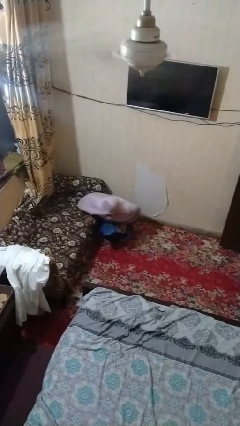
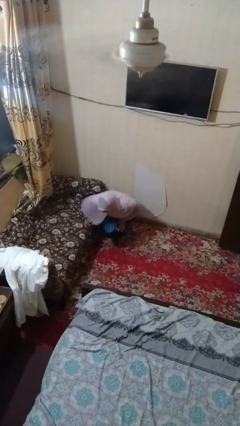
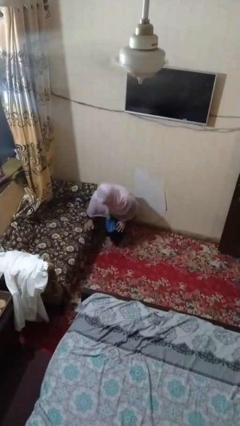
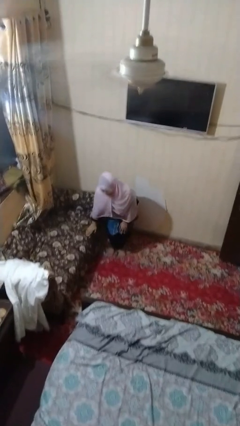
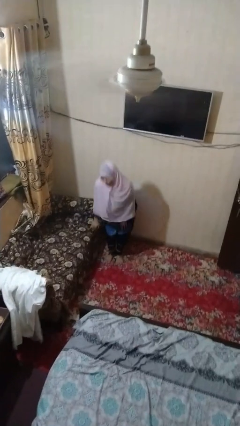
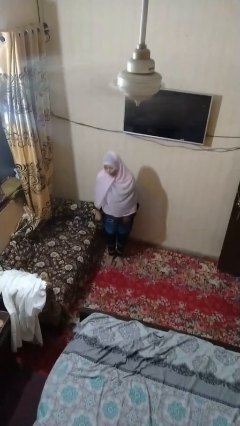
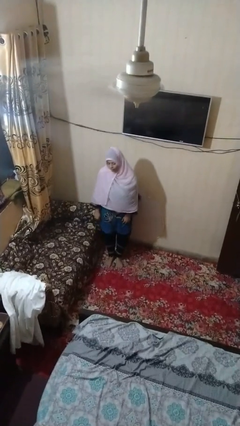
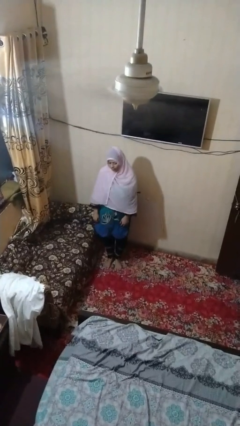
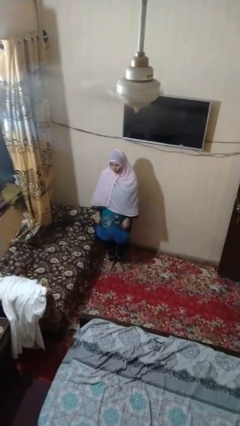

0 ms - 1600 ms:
person stands up

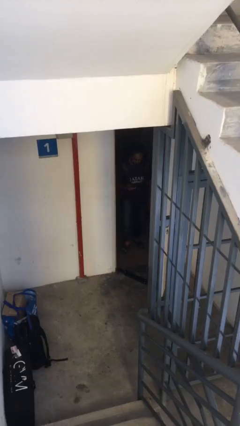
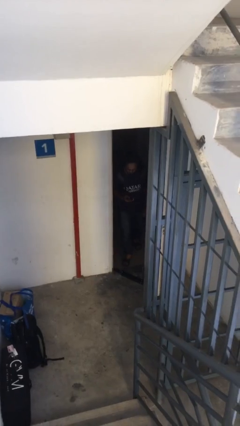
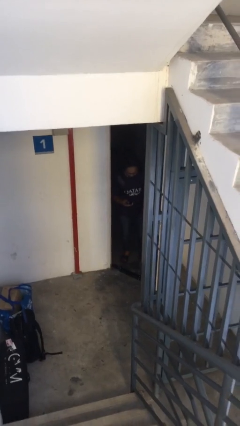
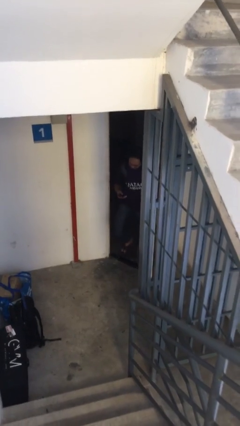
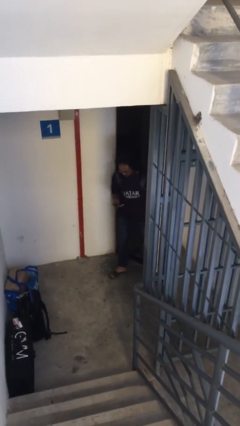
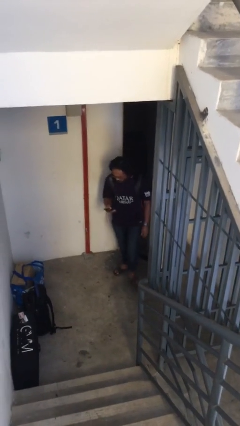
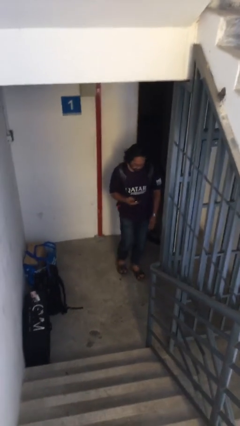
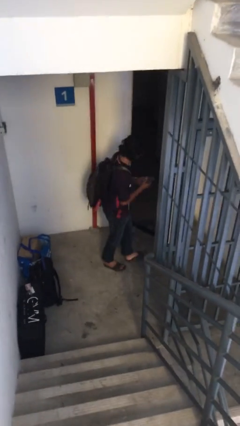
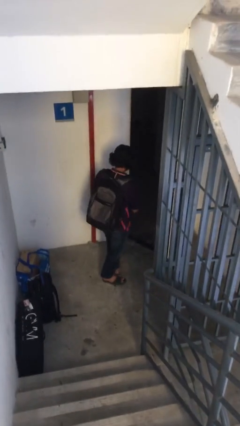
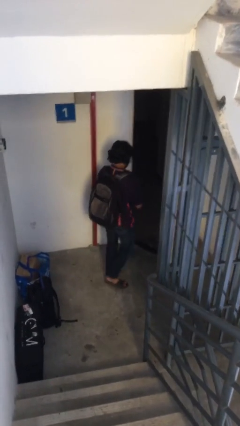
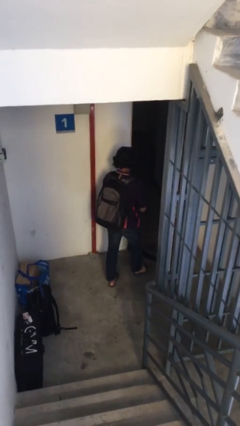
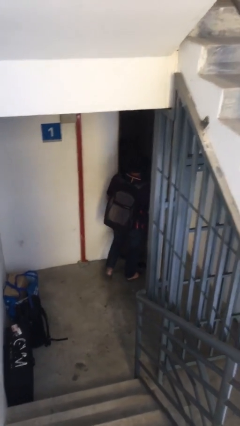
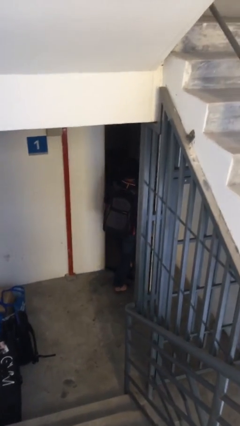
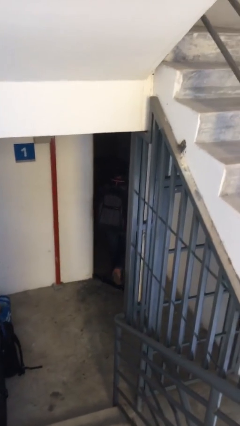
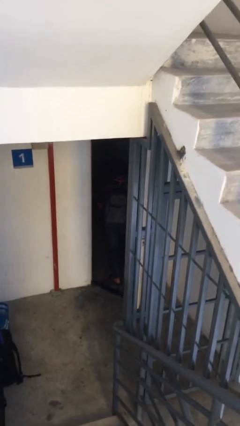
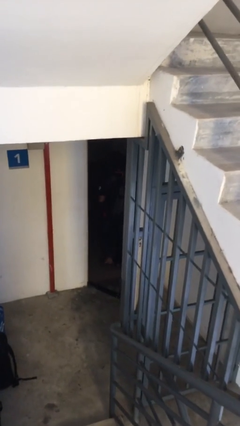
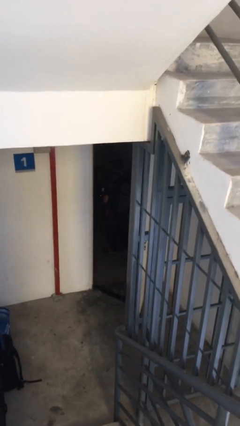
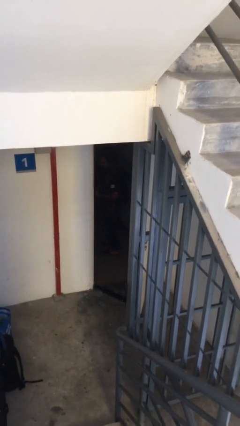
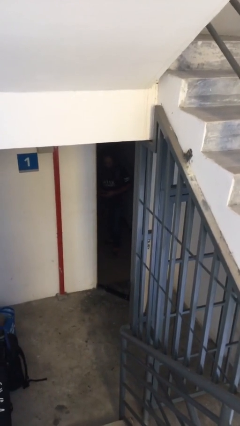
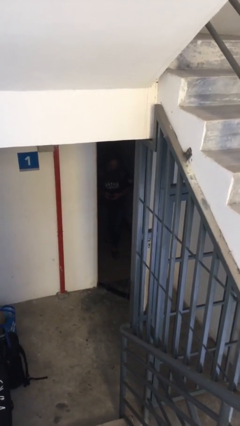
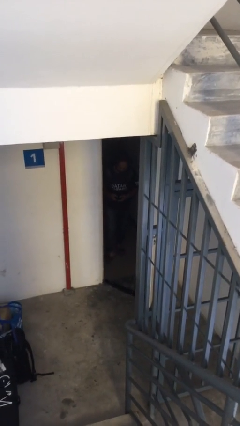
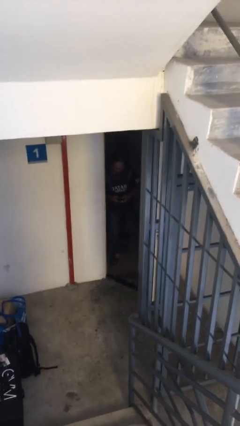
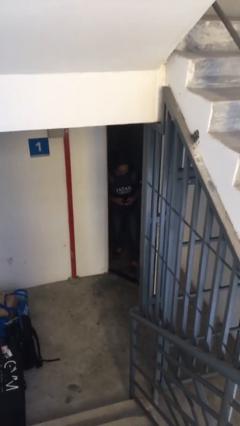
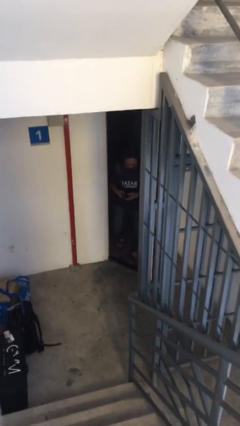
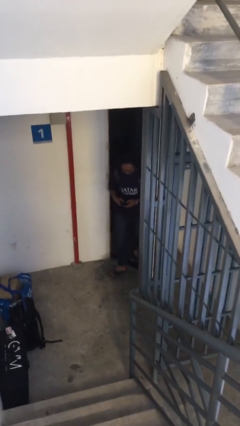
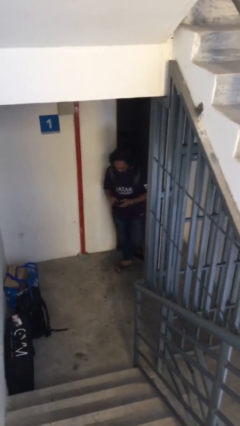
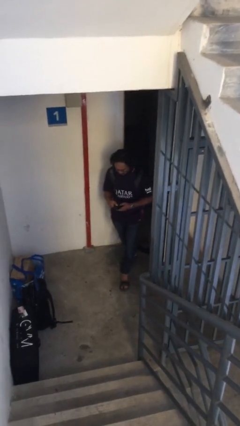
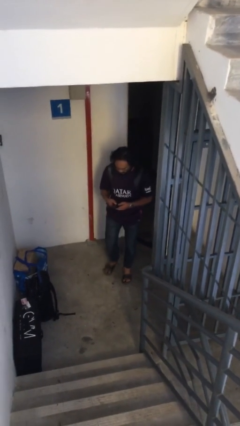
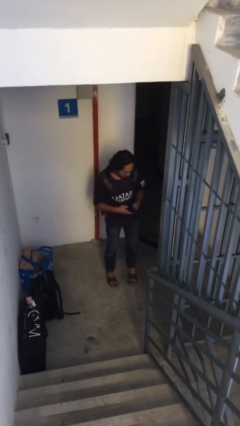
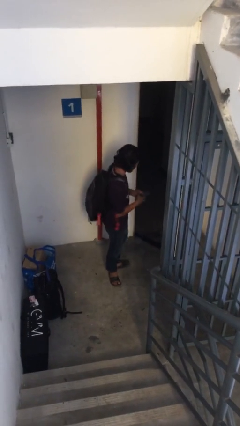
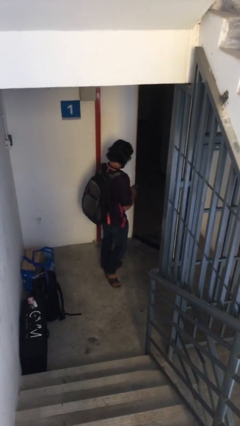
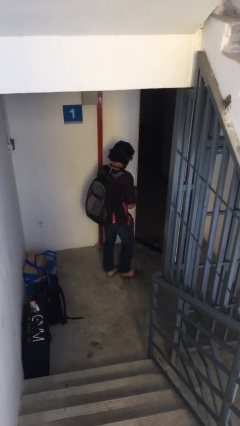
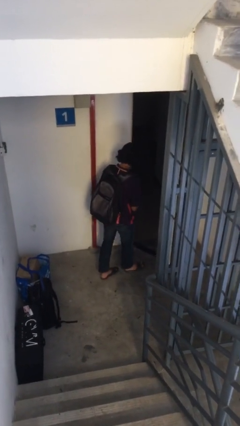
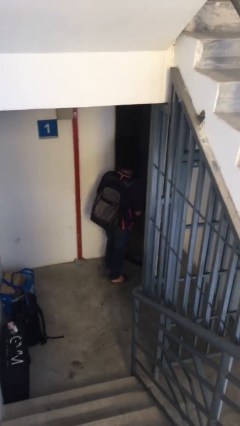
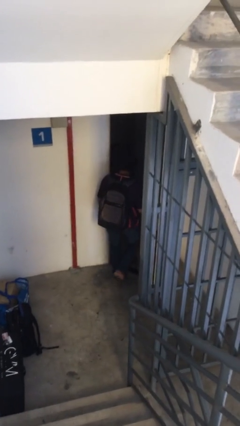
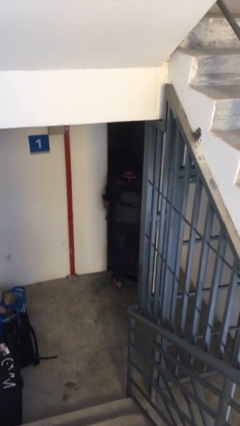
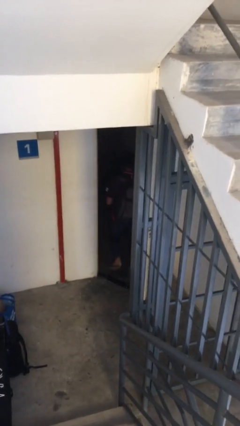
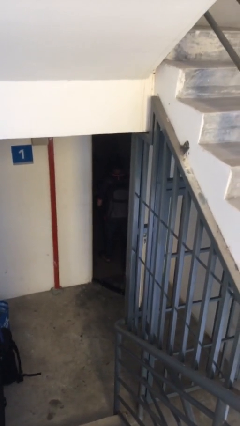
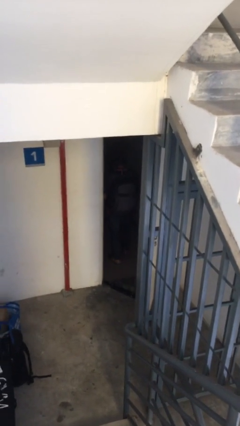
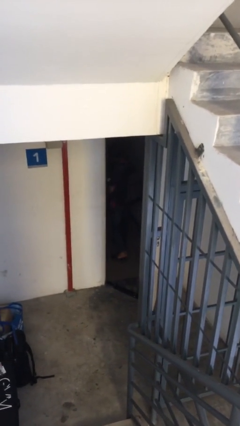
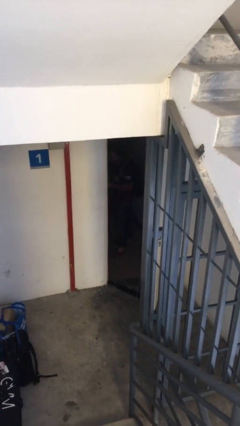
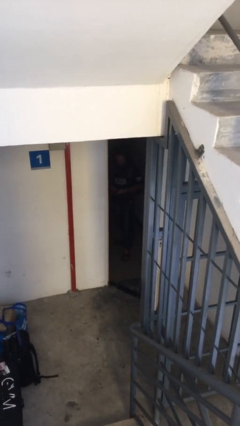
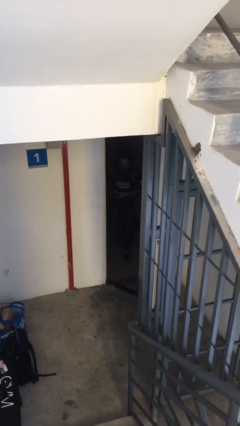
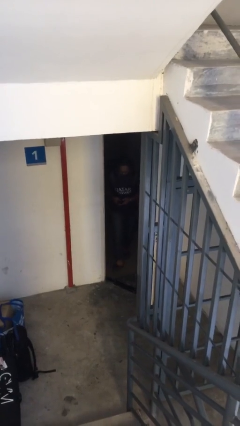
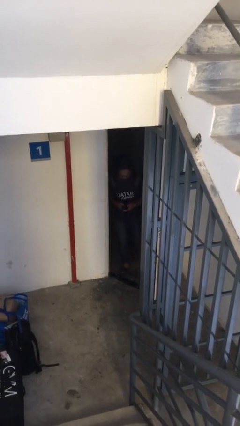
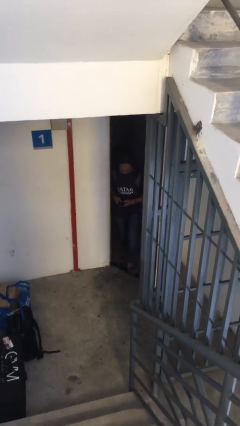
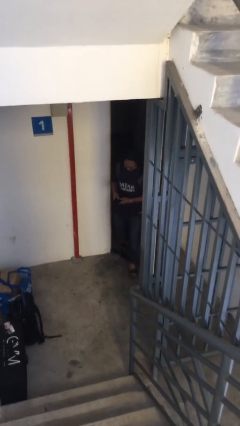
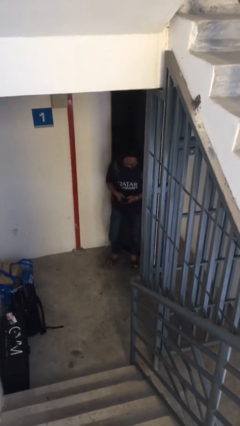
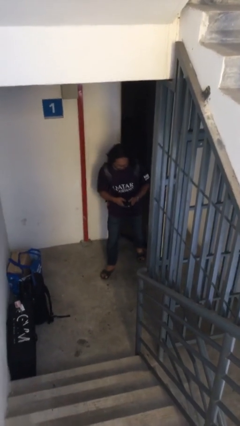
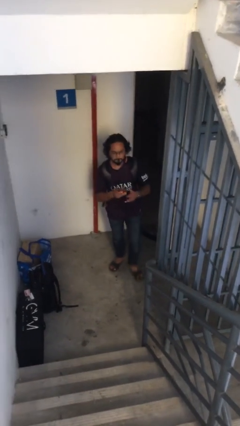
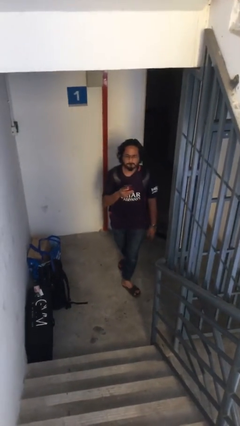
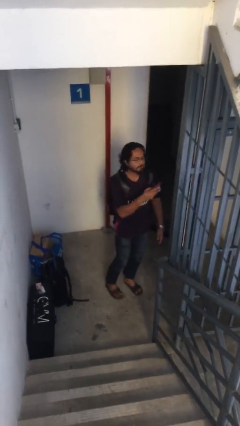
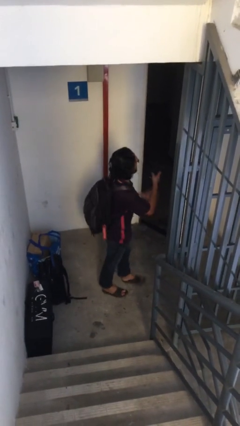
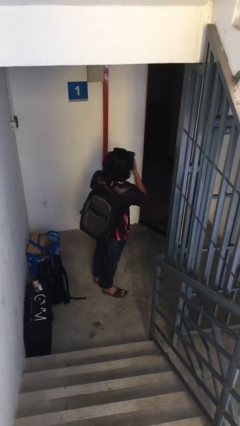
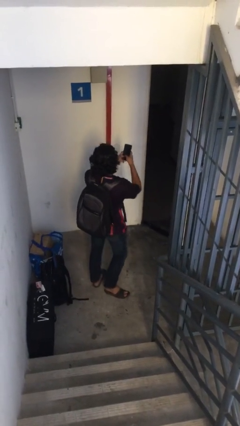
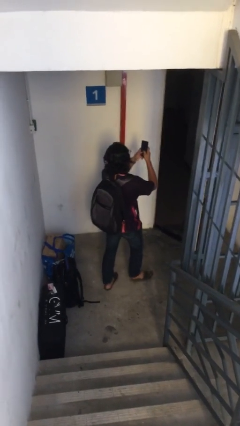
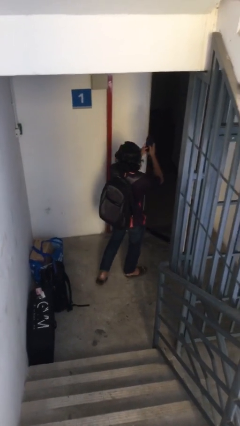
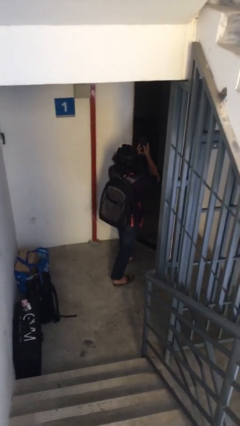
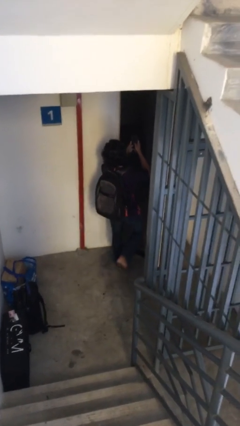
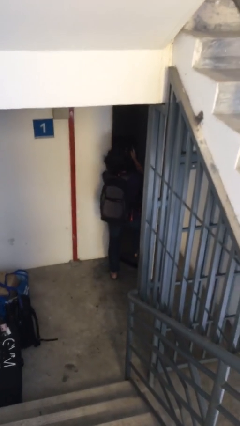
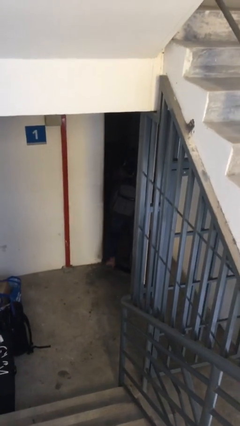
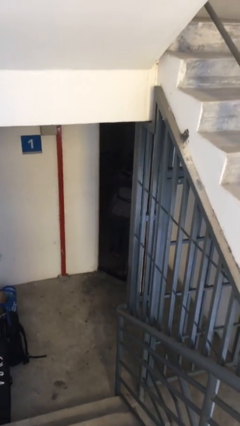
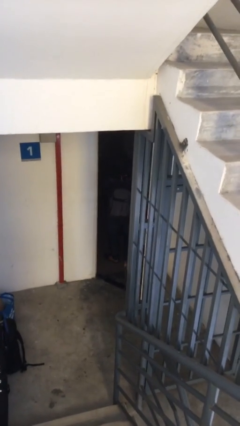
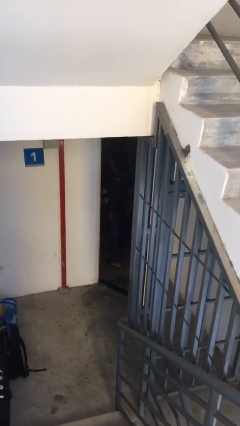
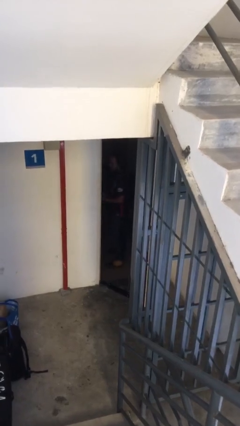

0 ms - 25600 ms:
person texts on phone

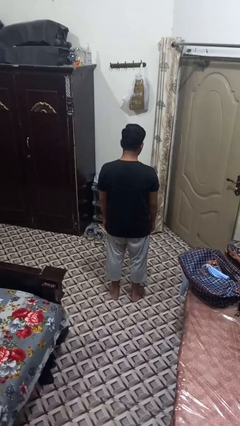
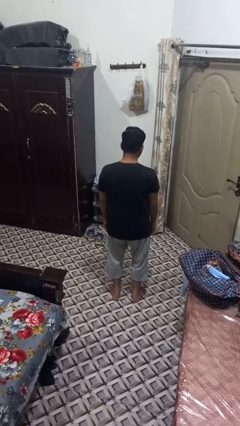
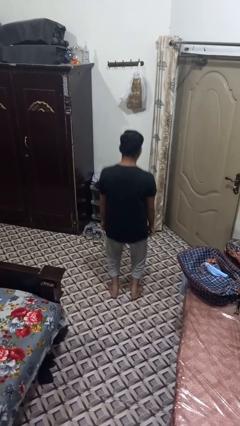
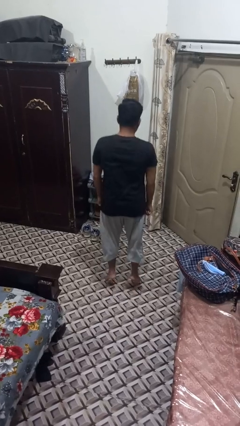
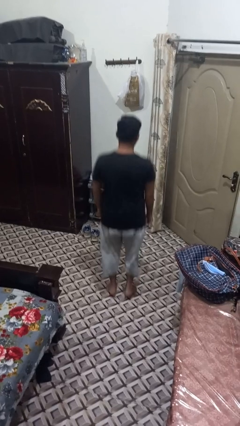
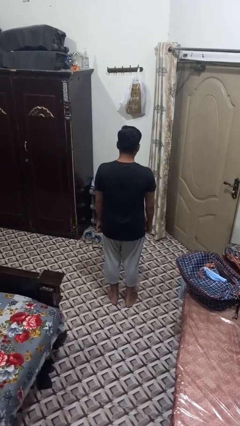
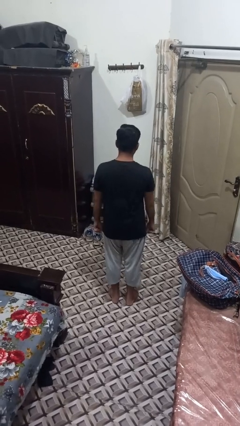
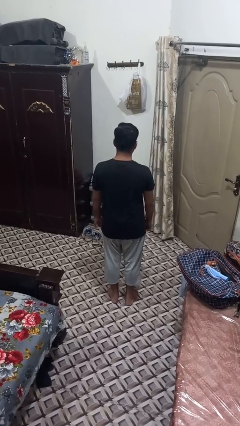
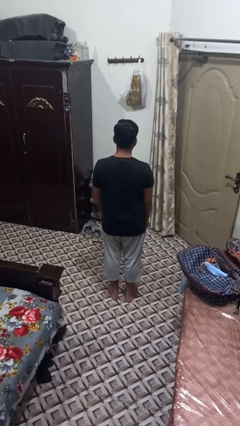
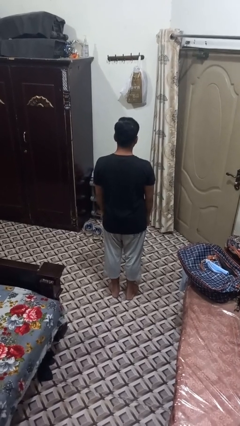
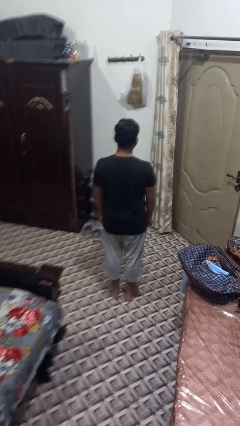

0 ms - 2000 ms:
person jumps

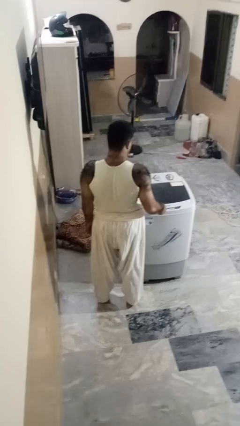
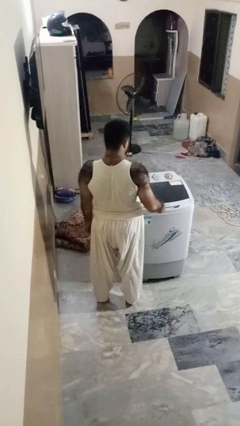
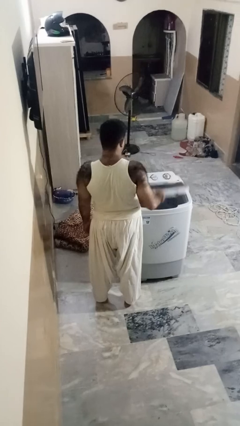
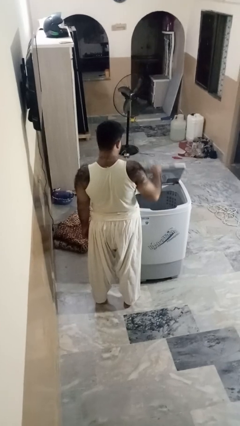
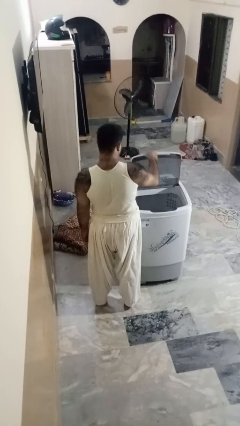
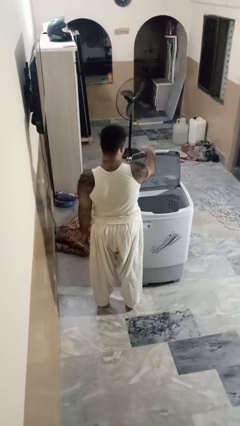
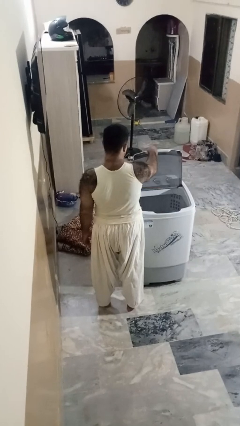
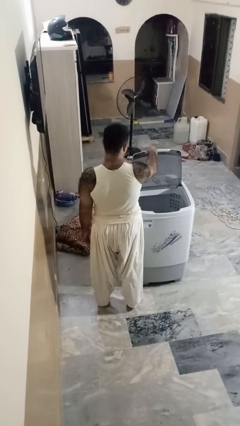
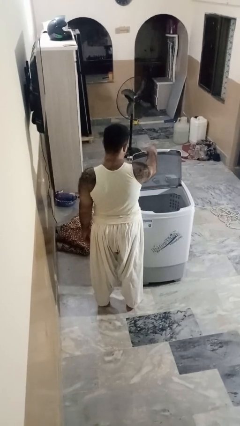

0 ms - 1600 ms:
person opens clothes washer
